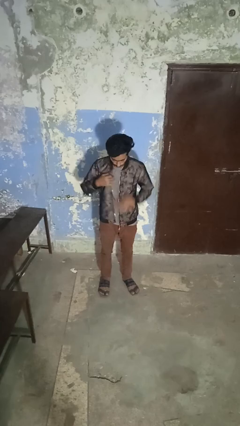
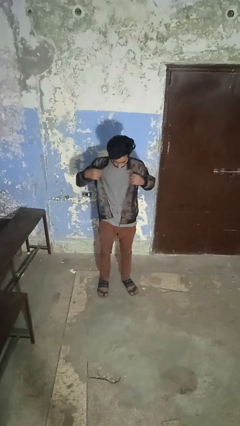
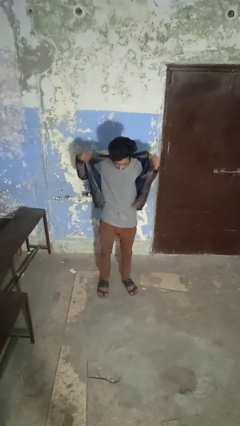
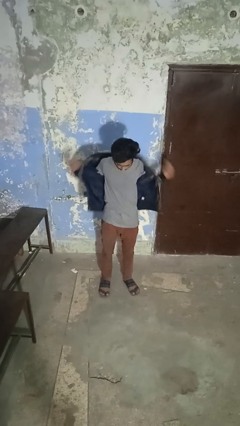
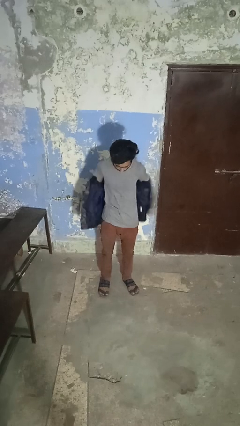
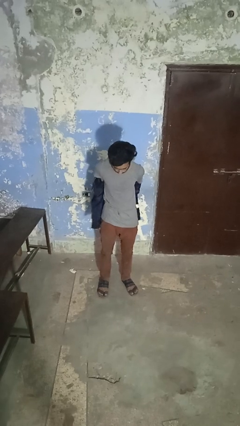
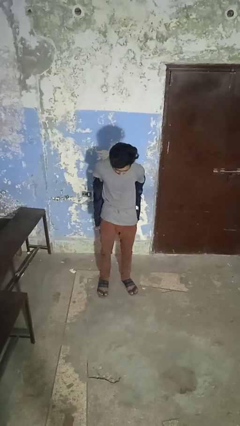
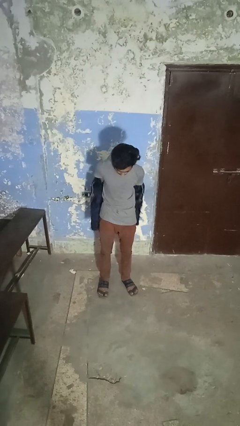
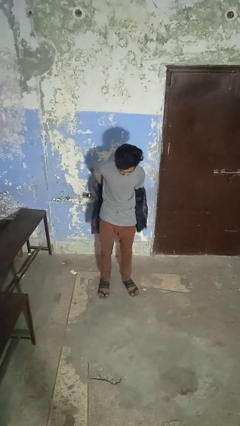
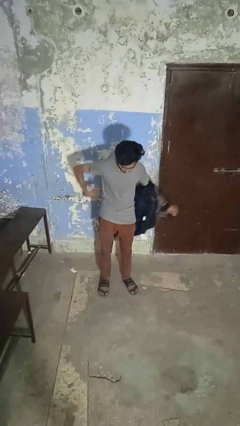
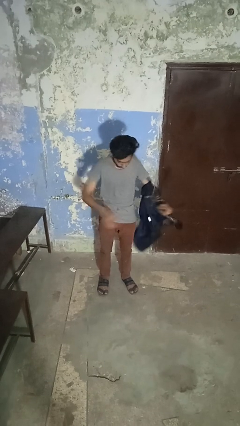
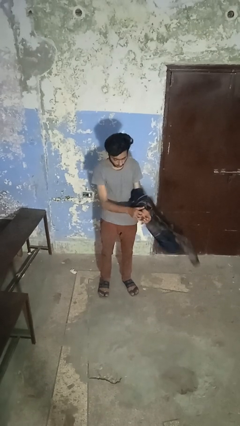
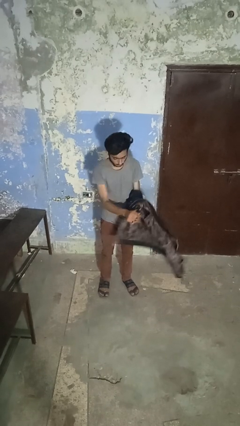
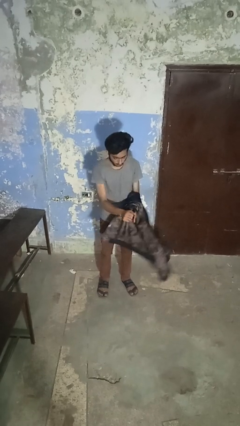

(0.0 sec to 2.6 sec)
person takes off jacket

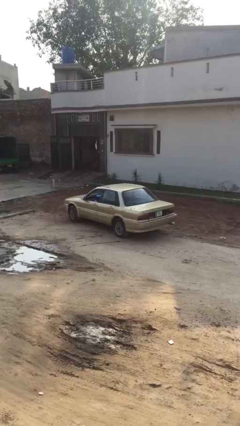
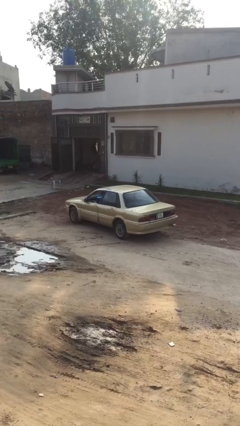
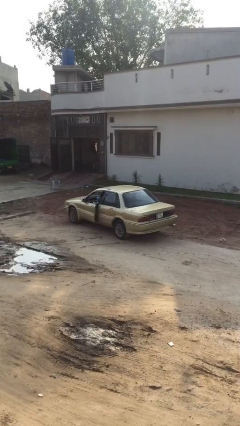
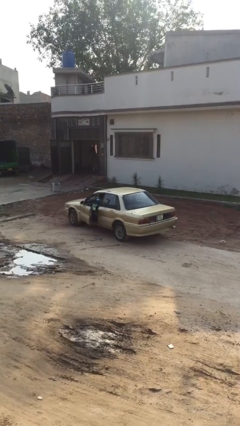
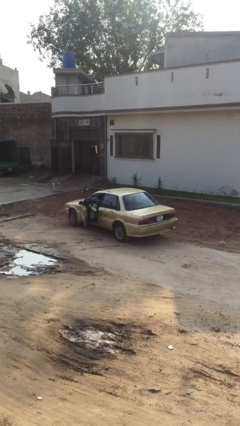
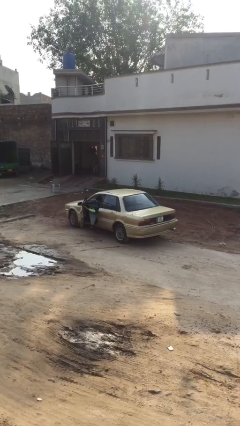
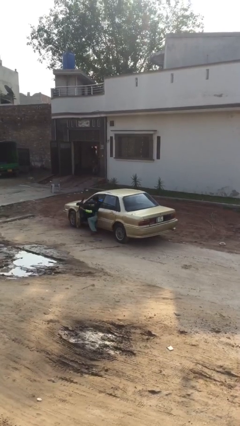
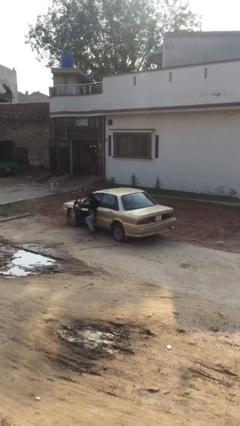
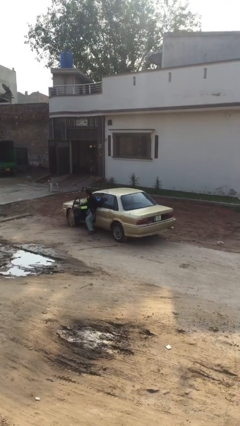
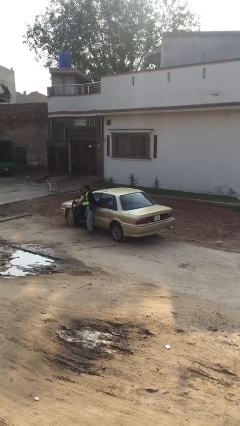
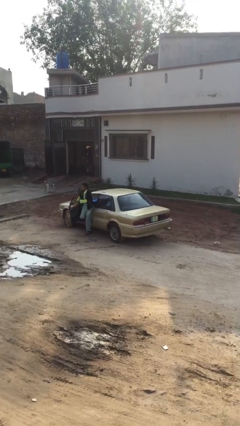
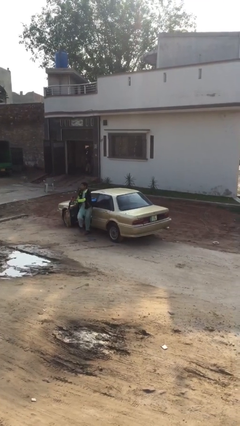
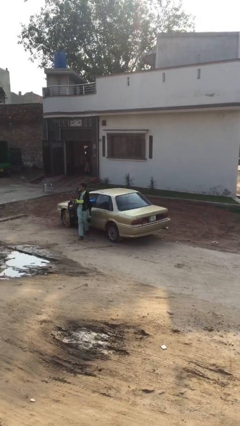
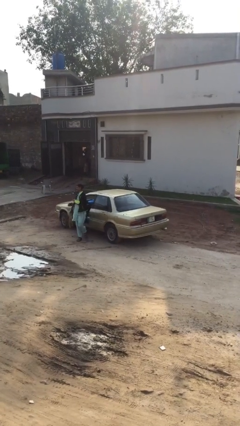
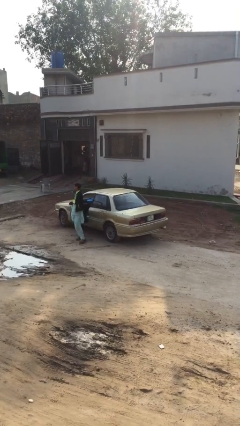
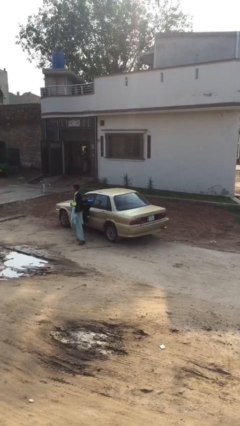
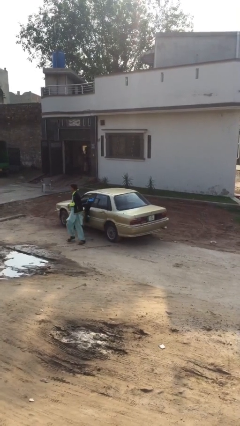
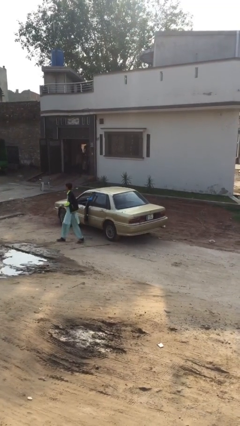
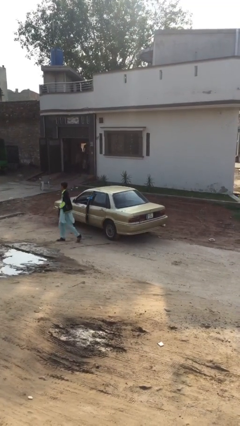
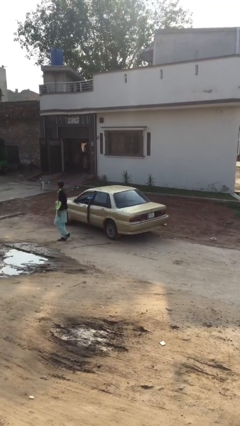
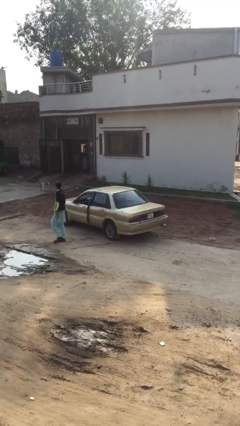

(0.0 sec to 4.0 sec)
car drops off person

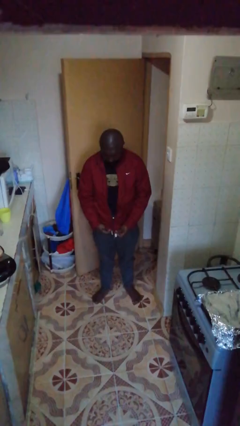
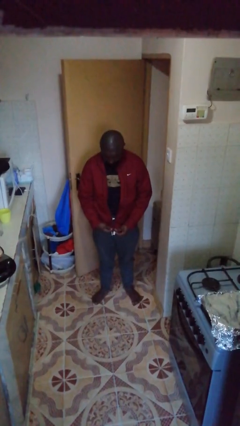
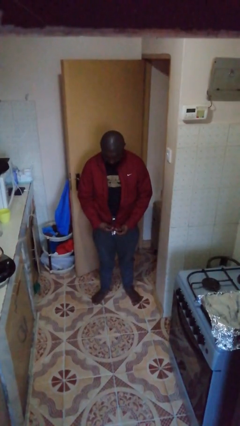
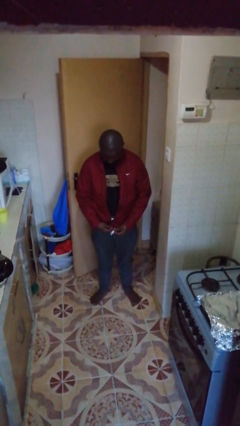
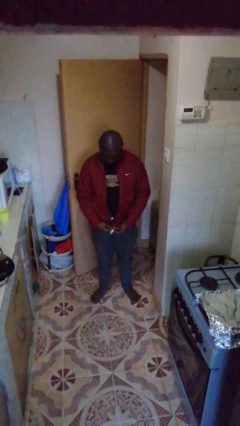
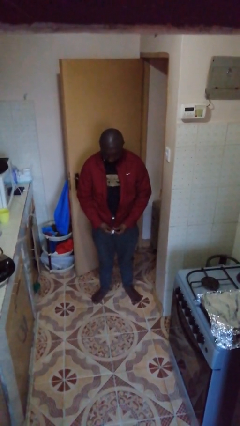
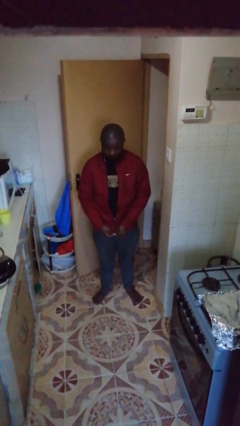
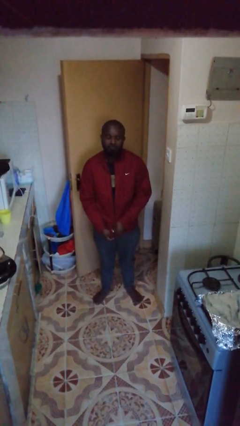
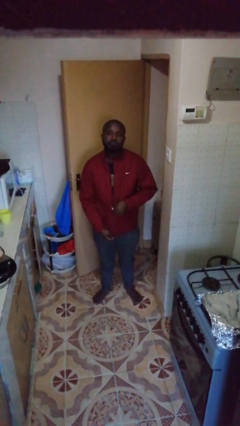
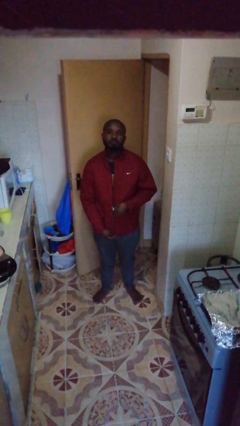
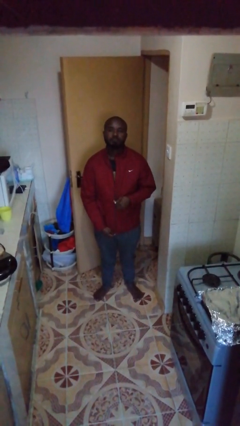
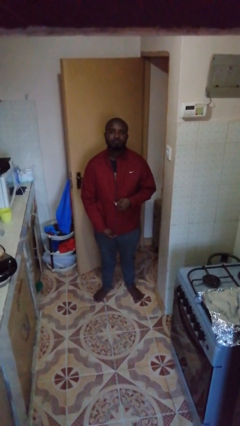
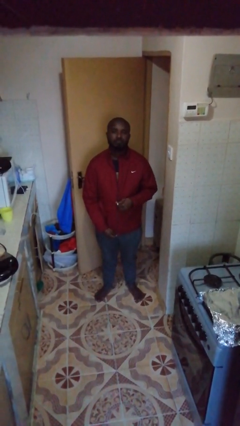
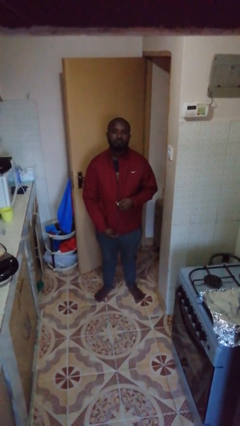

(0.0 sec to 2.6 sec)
person zips up jacket

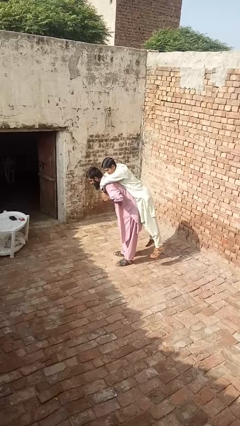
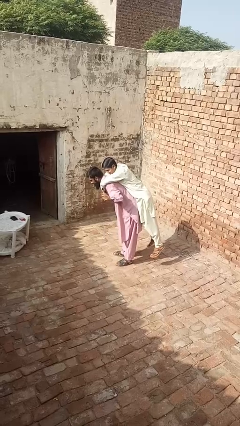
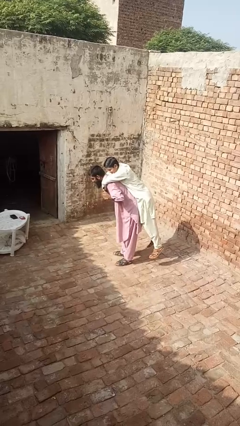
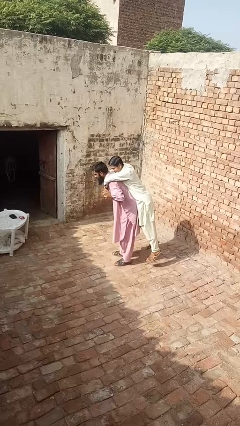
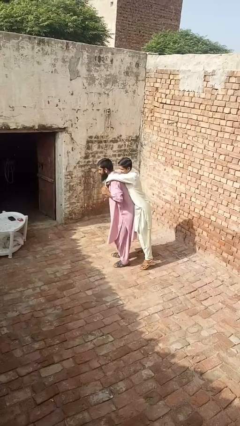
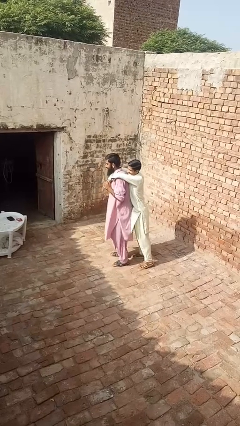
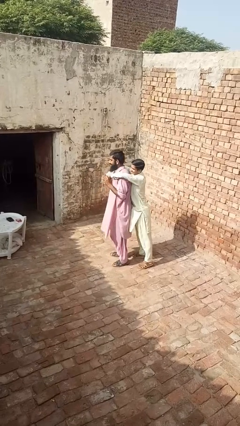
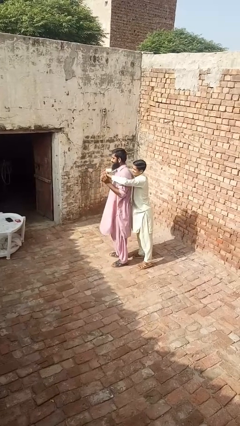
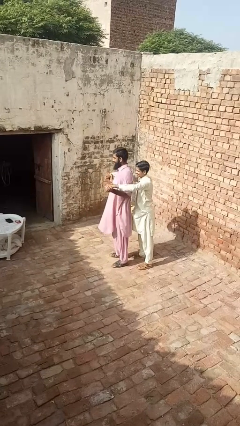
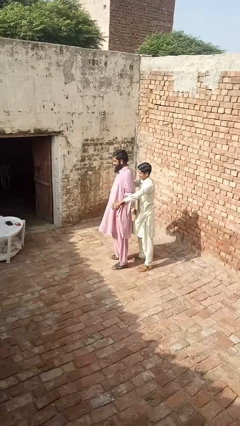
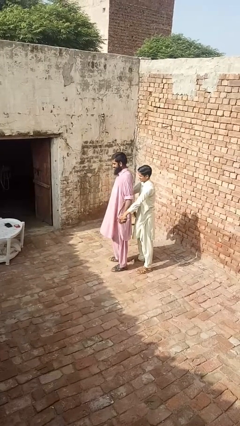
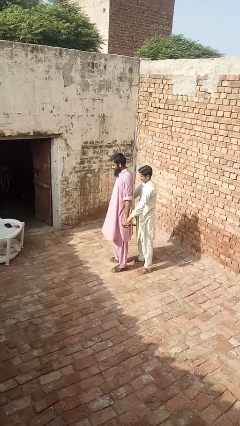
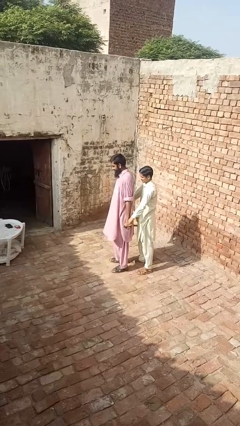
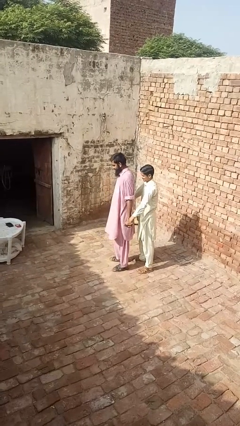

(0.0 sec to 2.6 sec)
person puts down person

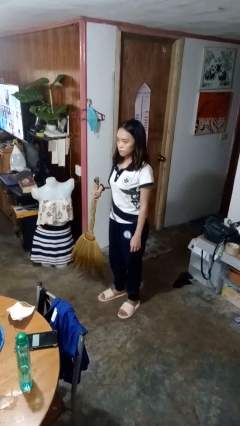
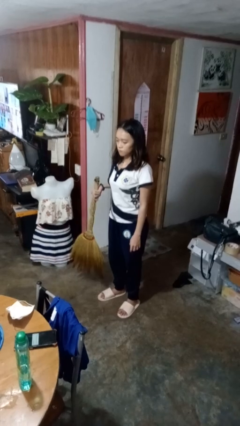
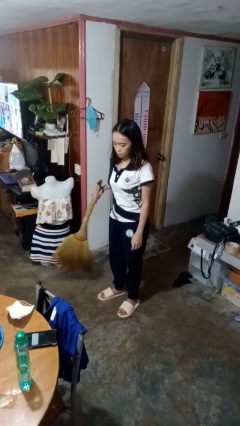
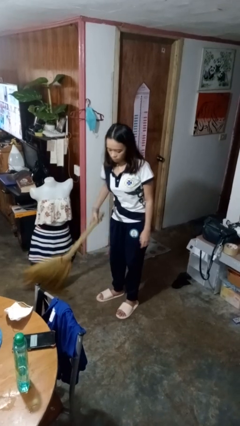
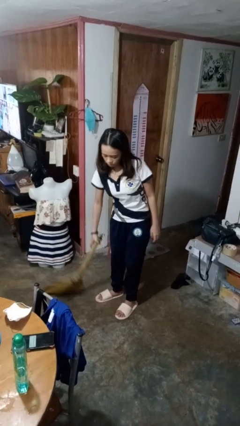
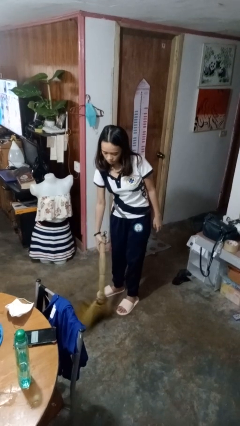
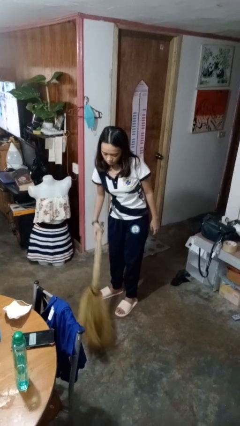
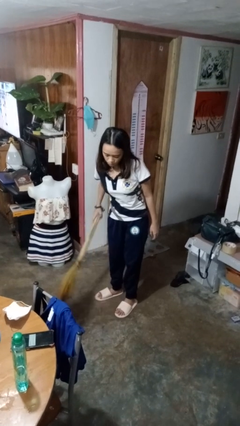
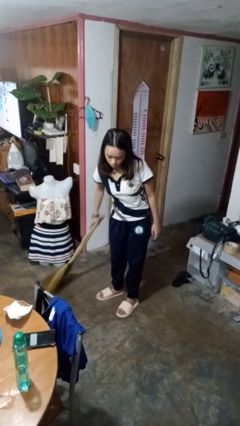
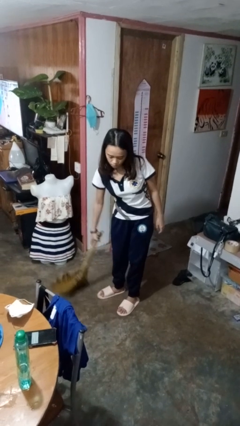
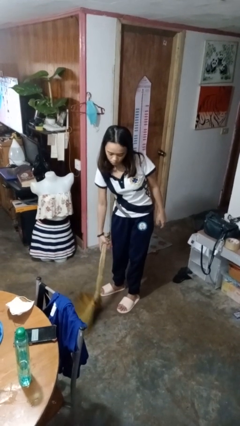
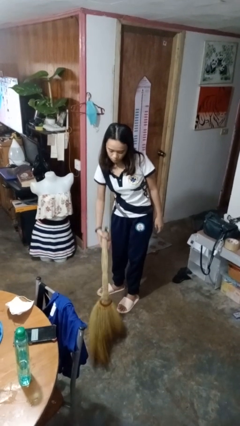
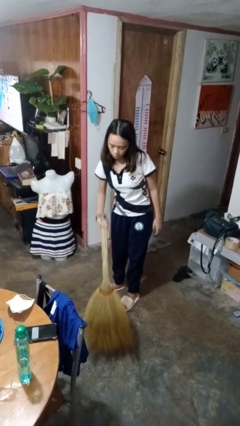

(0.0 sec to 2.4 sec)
person sweeps floor

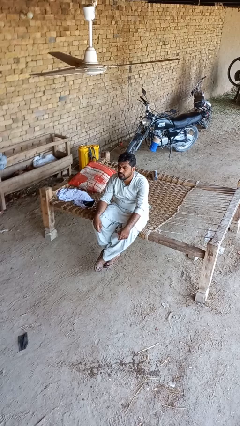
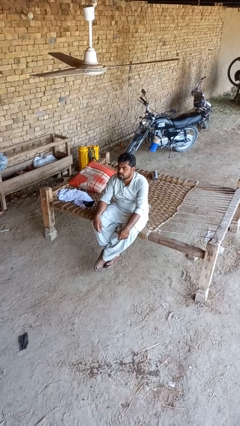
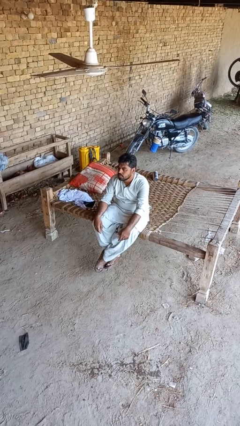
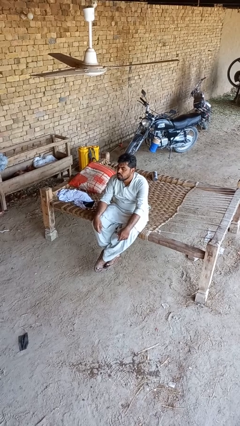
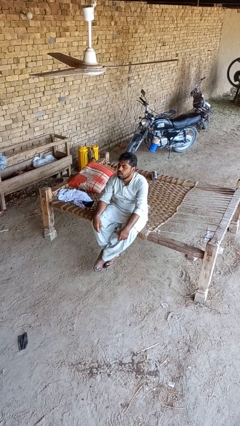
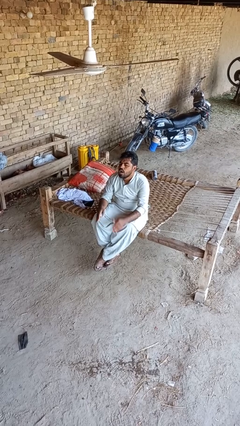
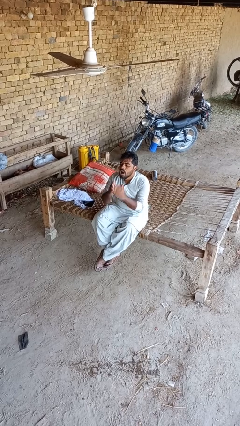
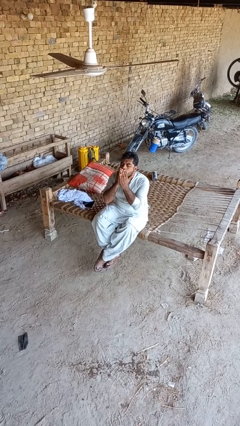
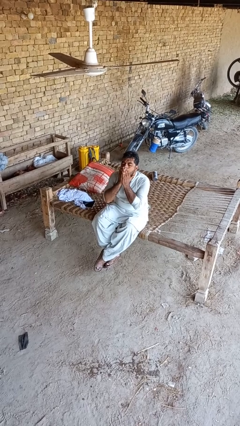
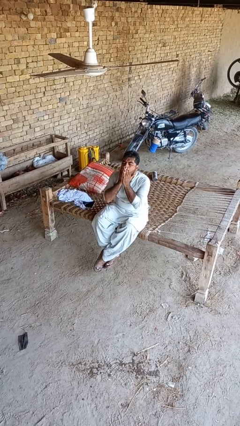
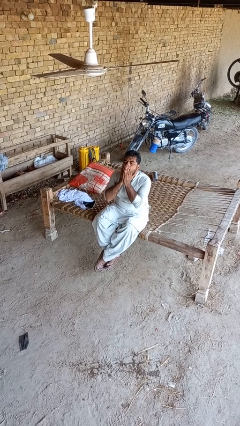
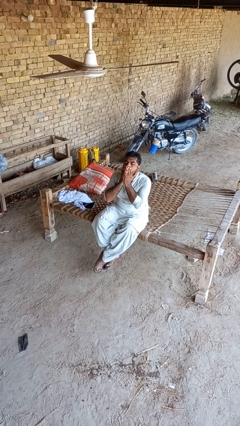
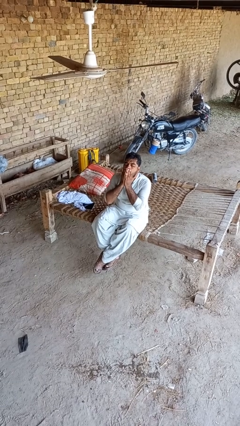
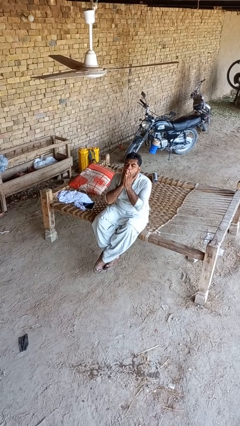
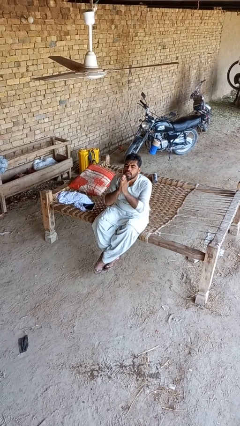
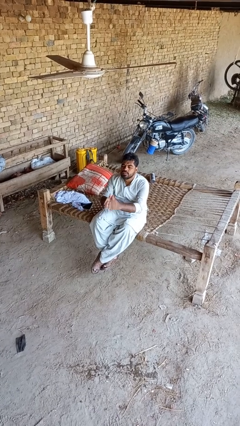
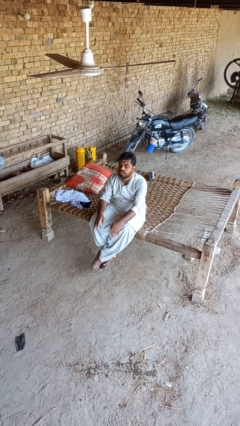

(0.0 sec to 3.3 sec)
person yawns
